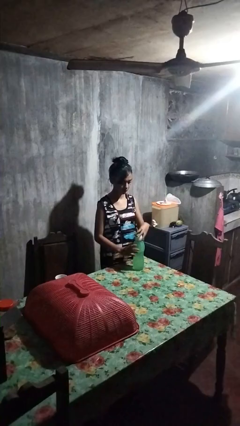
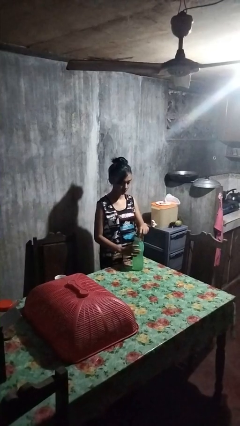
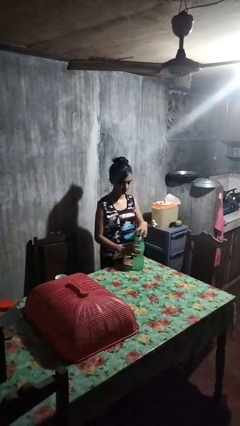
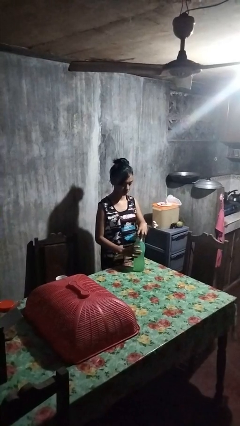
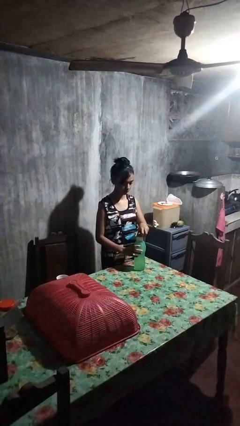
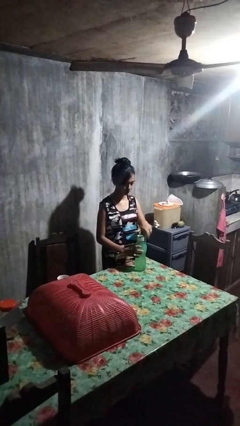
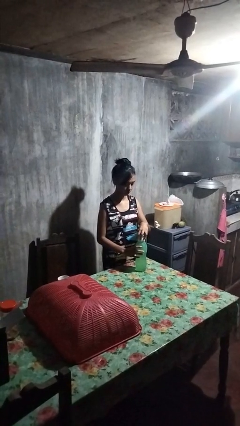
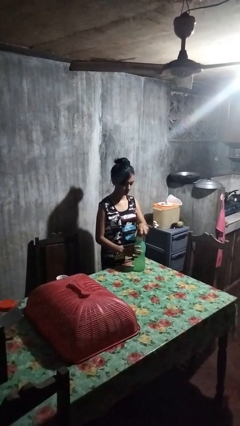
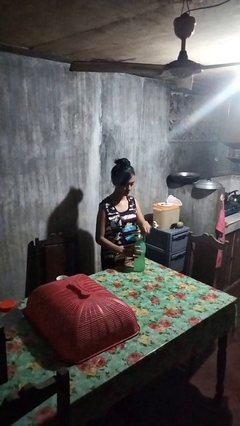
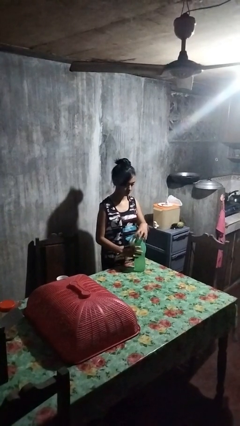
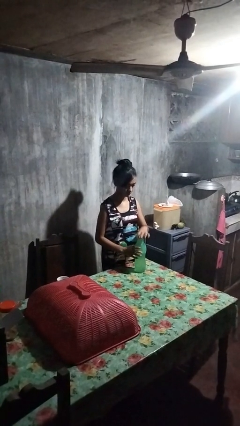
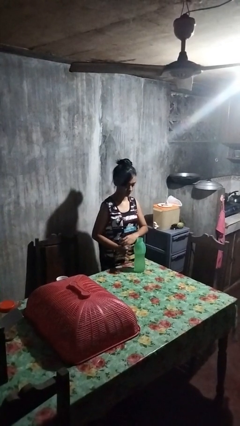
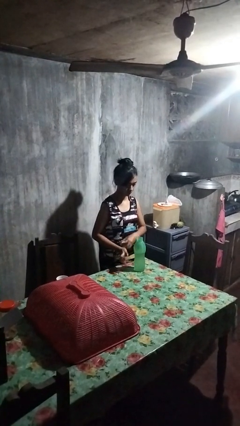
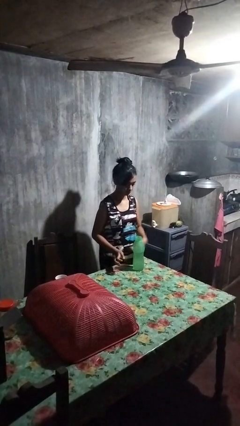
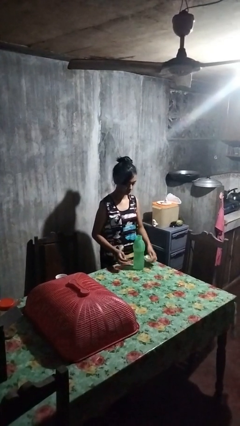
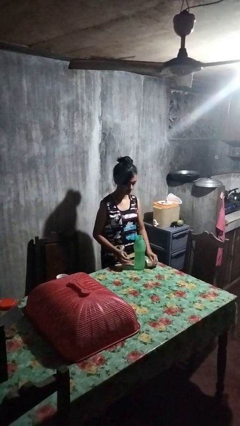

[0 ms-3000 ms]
person unscrews lid from bottle

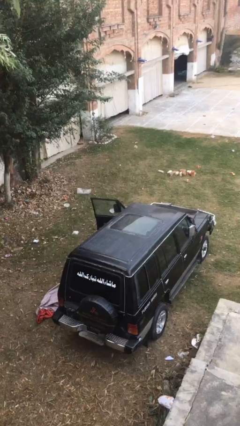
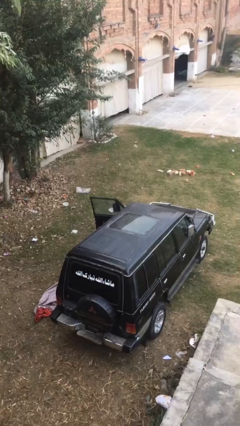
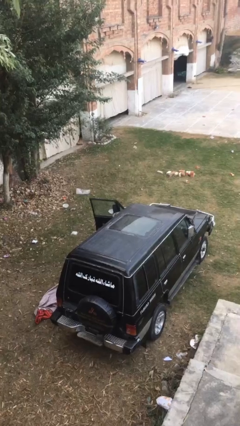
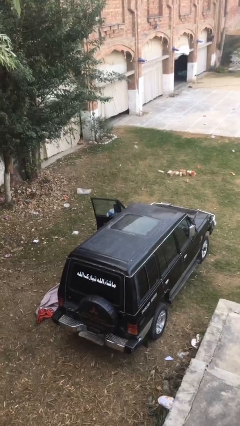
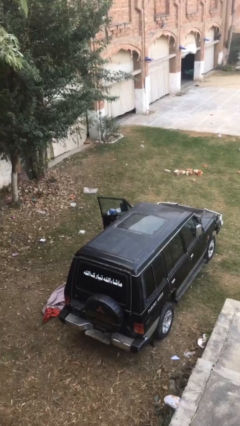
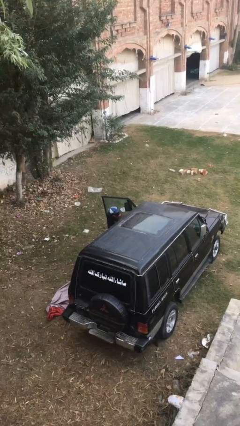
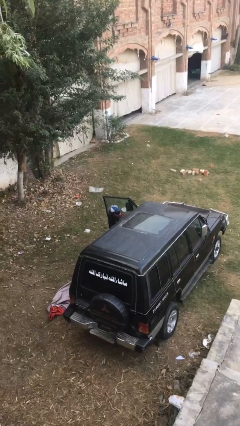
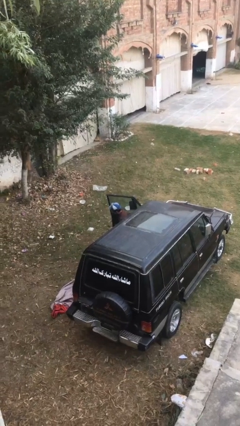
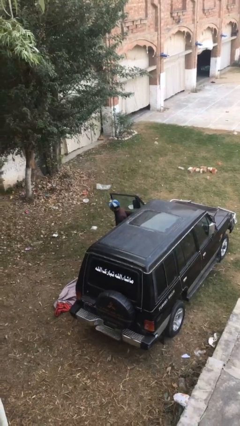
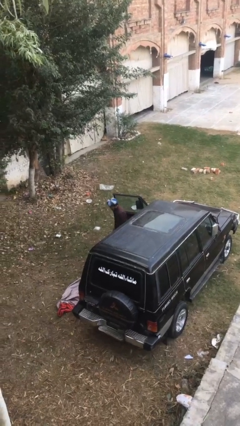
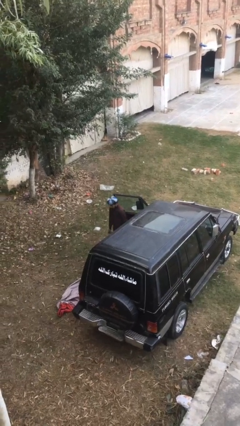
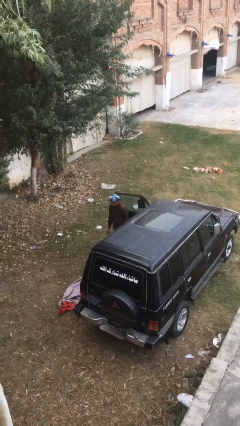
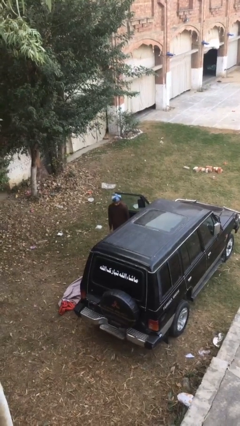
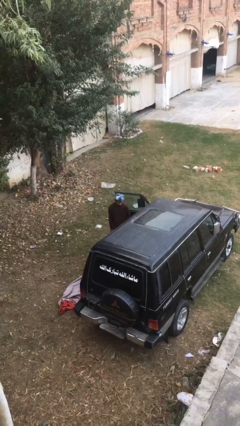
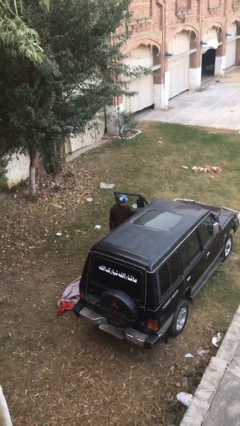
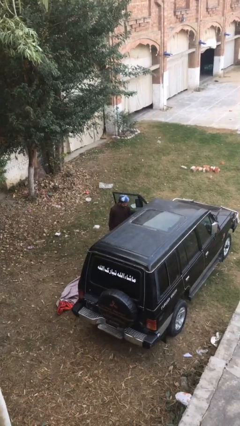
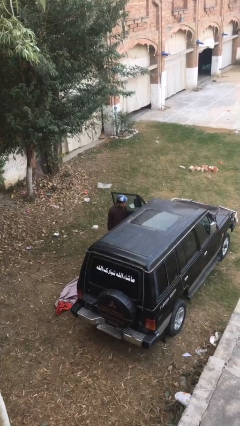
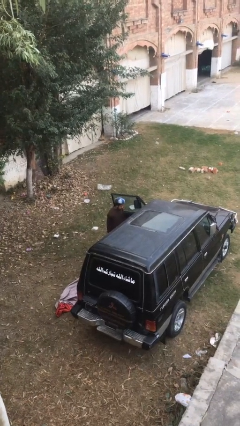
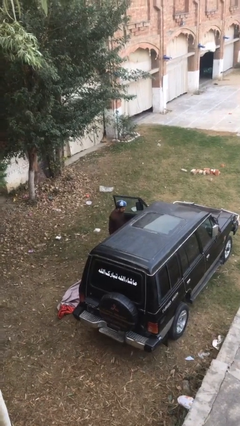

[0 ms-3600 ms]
person exits car

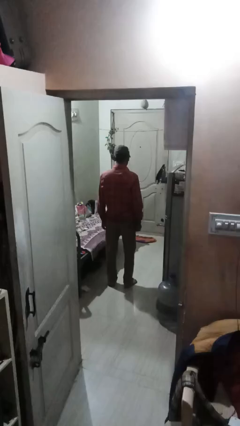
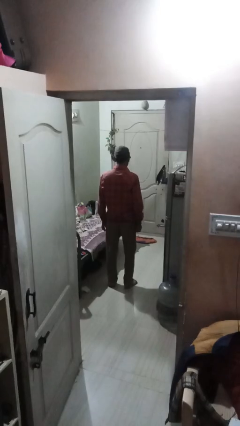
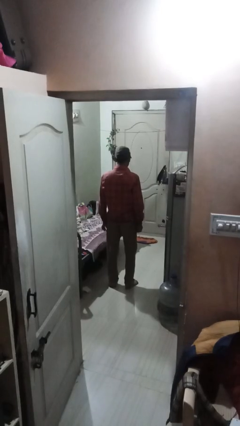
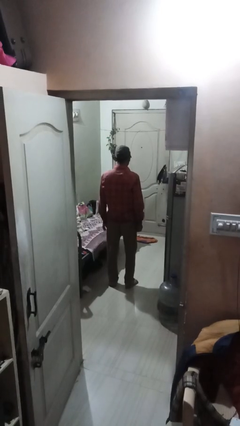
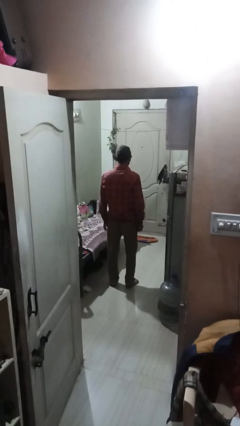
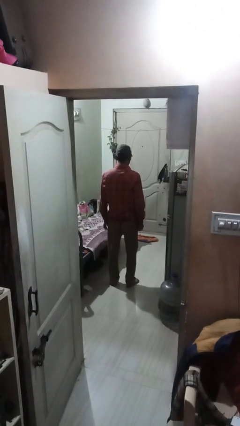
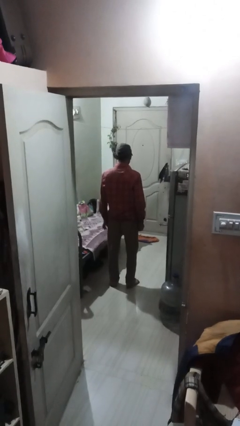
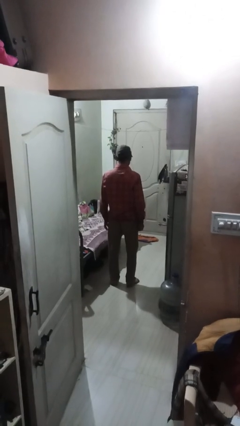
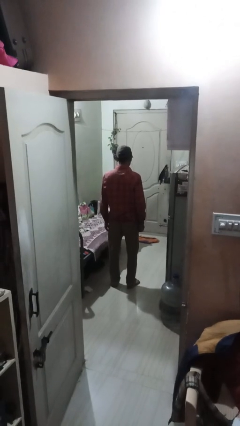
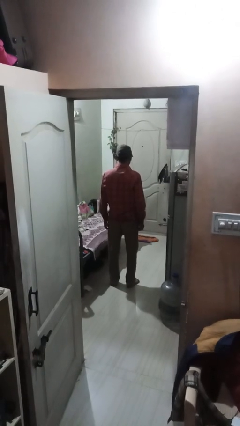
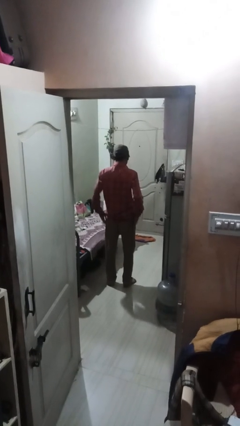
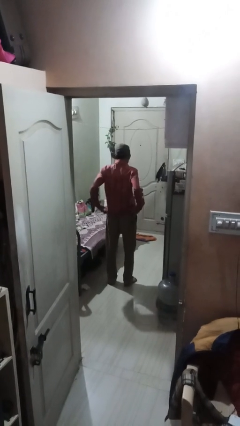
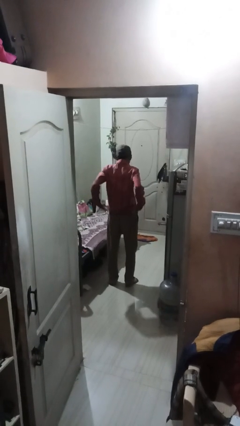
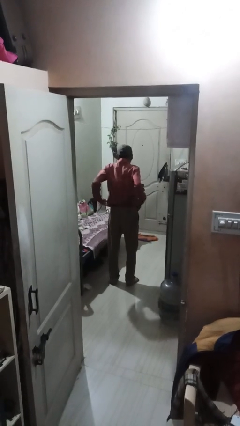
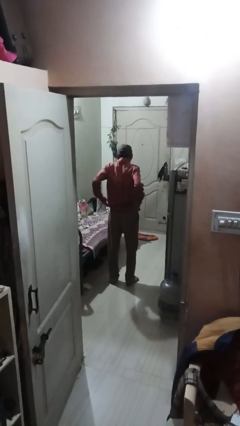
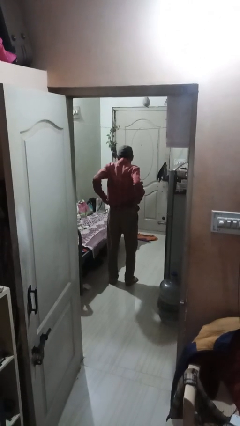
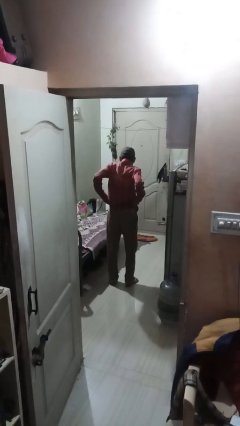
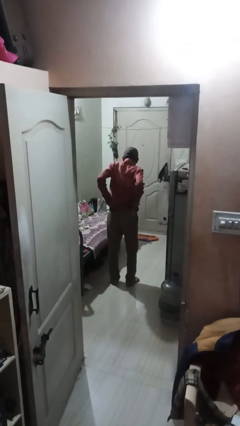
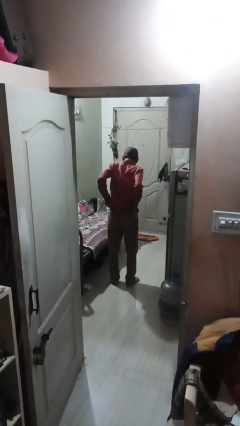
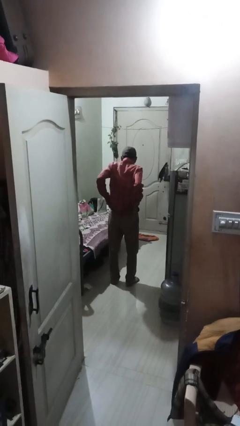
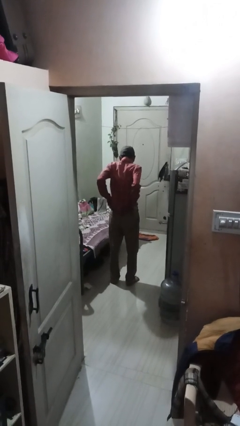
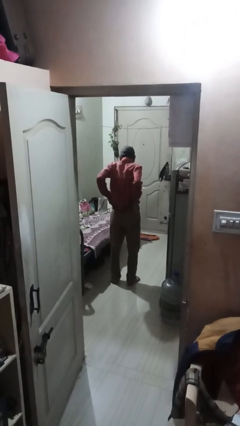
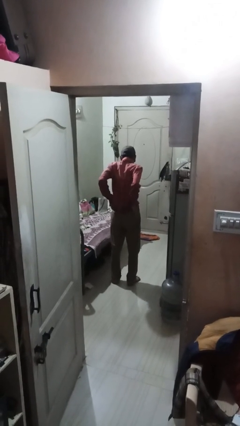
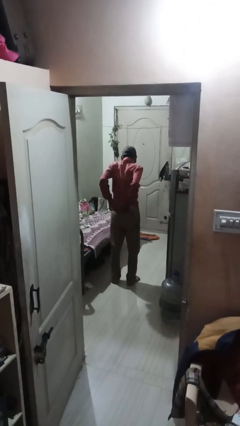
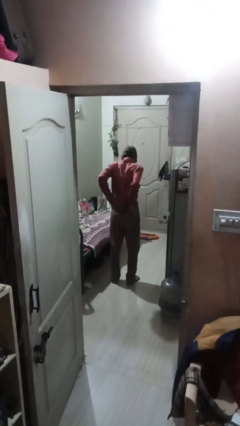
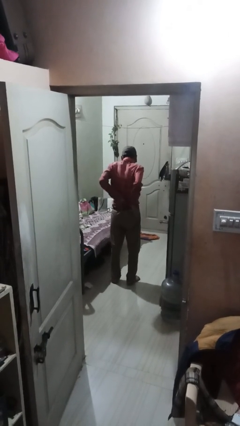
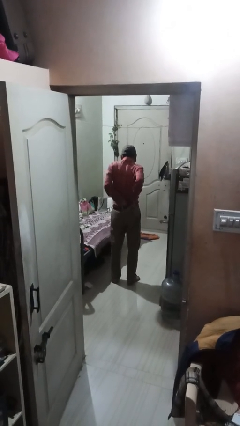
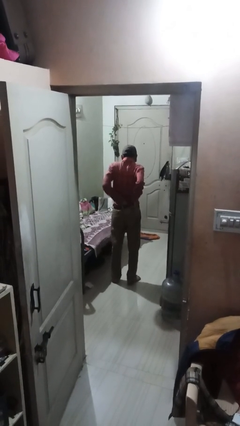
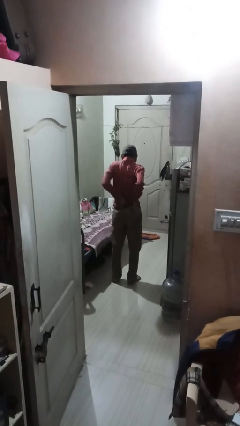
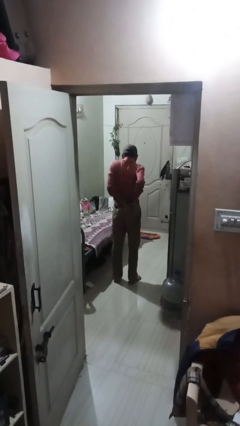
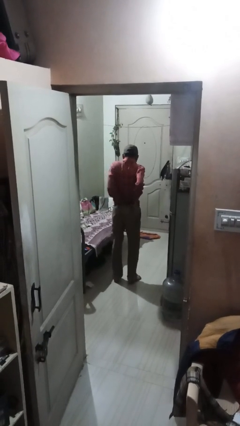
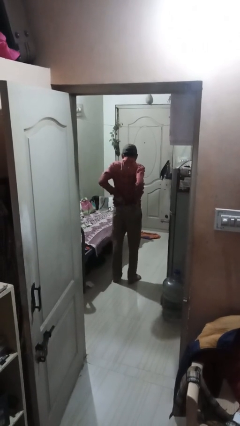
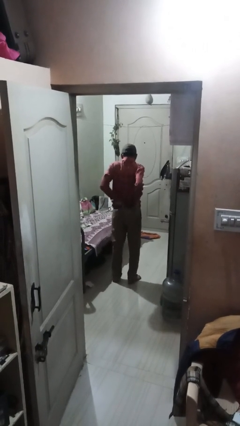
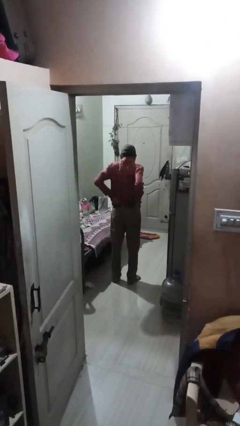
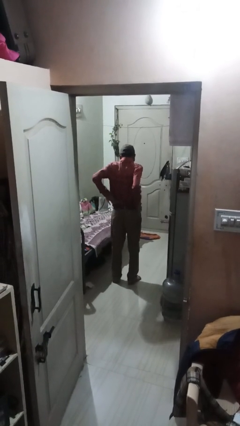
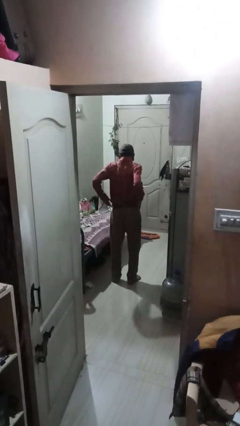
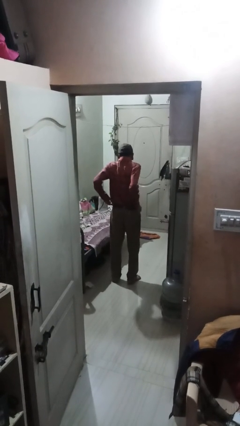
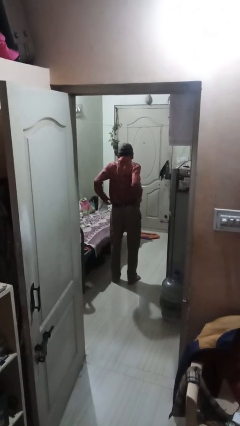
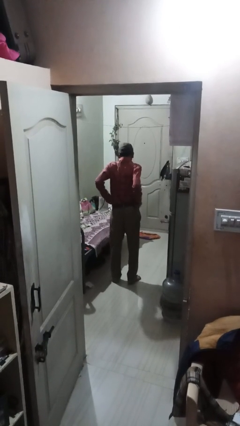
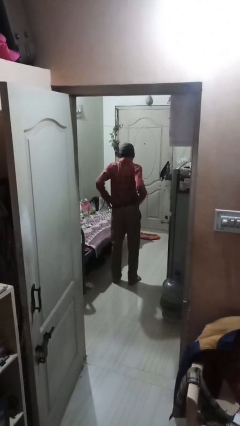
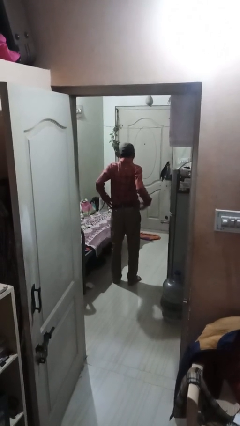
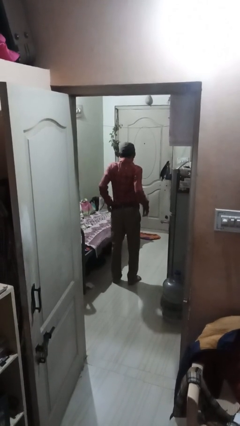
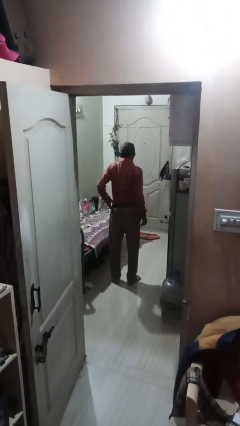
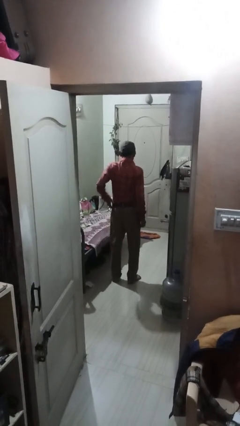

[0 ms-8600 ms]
person tucks in shirt

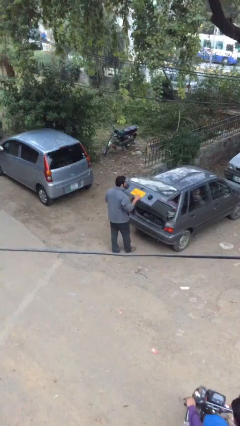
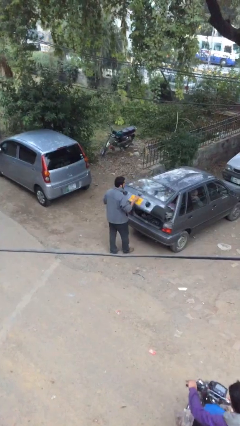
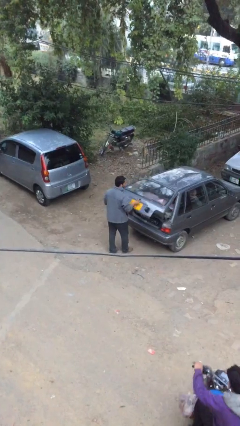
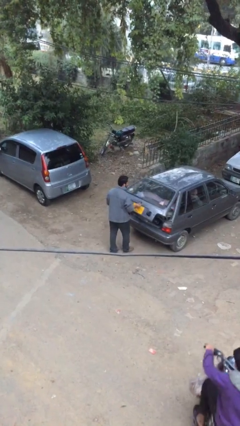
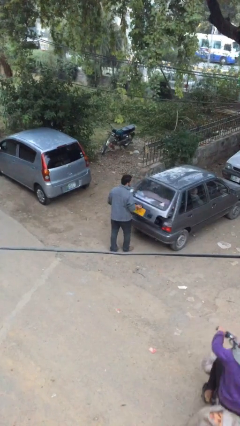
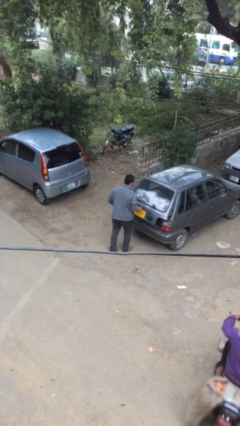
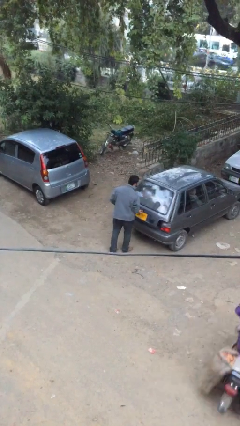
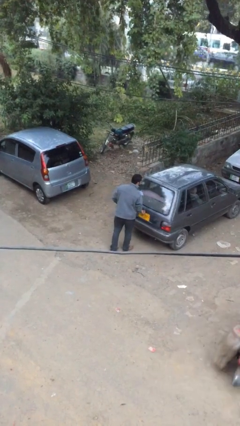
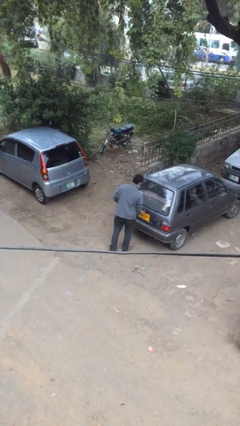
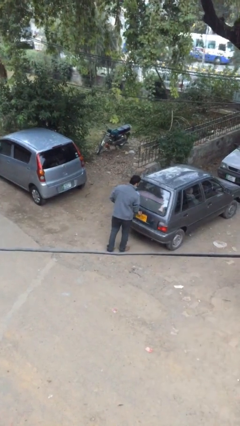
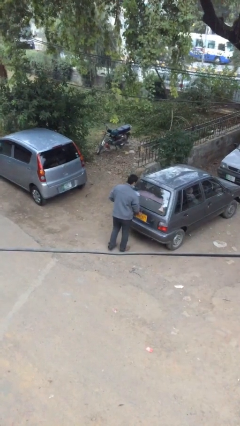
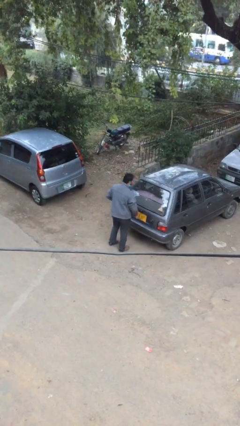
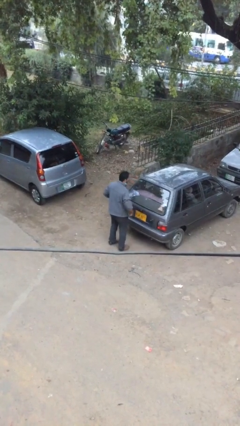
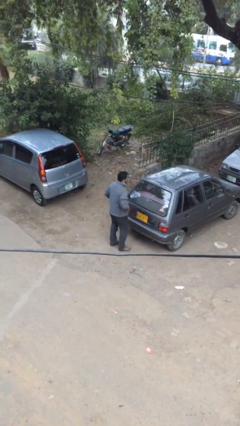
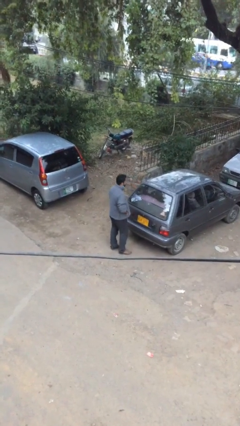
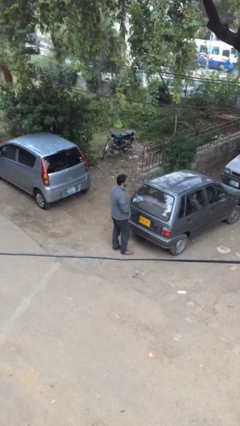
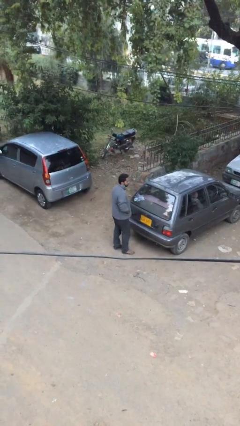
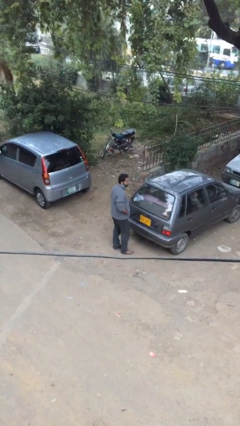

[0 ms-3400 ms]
person closes car trunk
